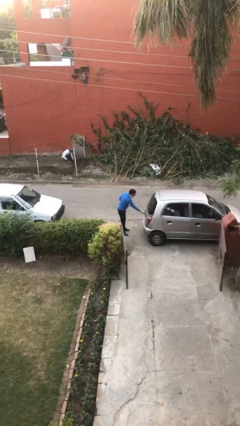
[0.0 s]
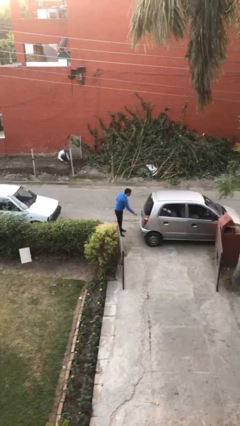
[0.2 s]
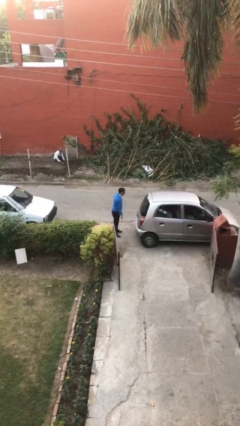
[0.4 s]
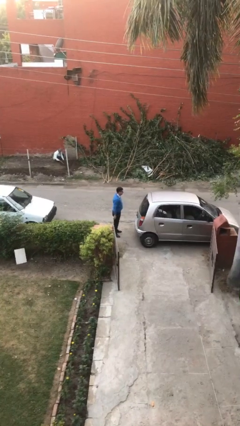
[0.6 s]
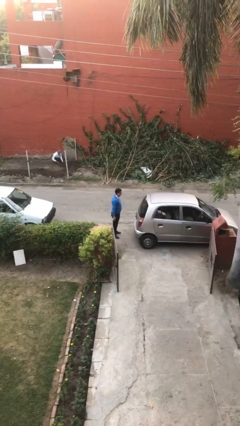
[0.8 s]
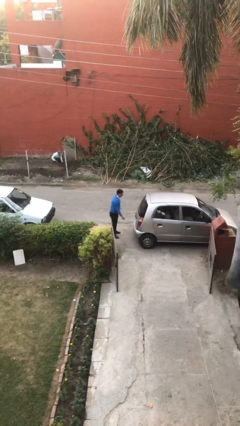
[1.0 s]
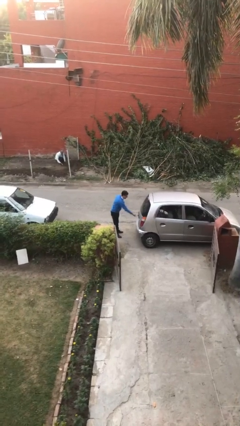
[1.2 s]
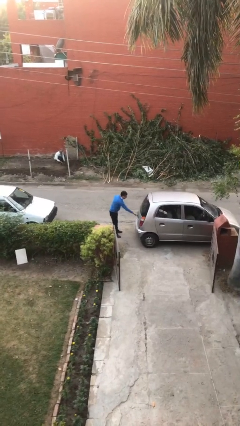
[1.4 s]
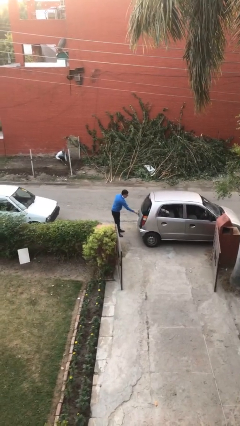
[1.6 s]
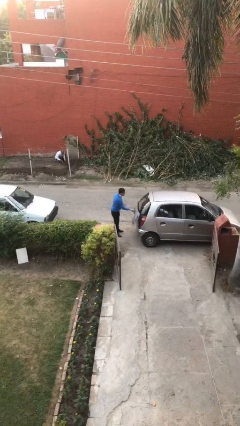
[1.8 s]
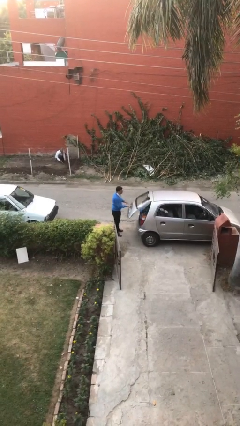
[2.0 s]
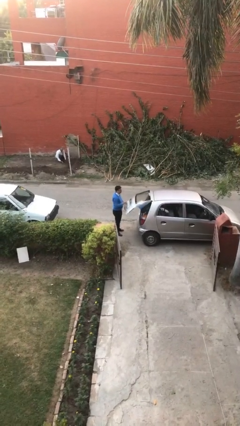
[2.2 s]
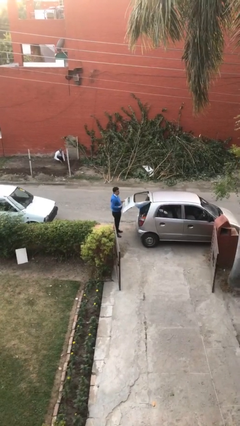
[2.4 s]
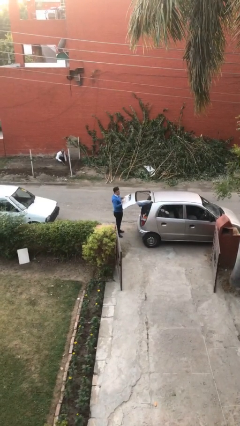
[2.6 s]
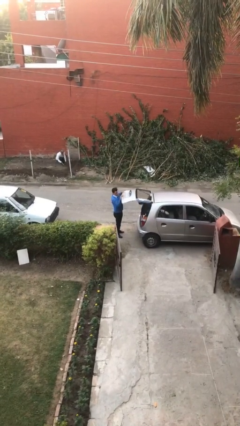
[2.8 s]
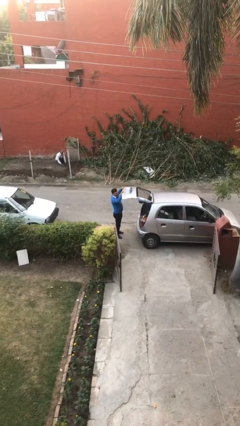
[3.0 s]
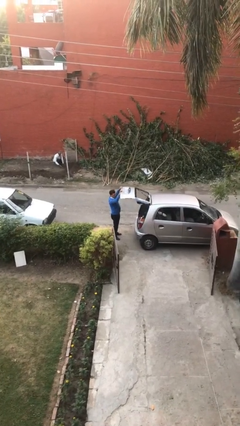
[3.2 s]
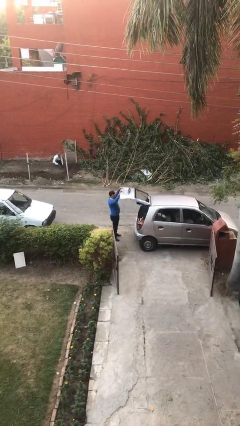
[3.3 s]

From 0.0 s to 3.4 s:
person opens car trunk

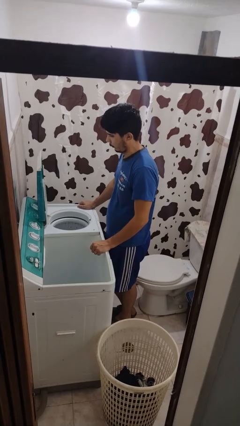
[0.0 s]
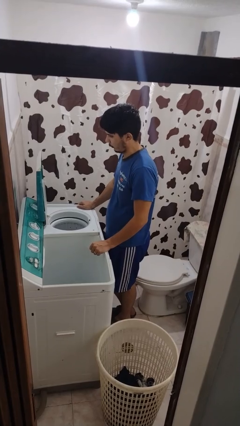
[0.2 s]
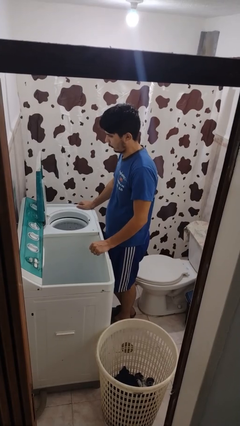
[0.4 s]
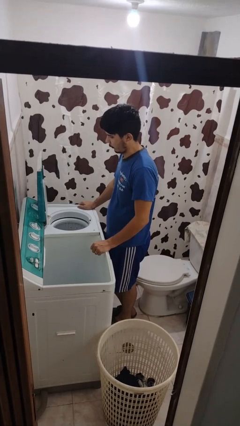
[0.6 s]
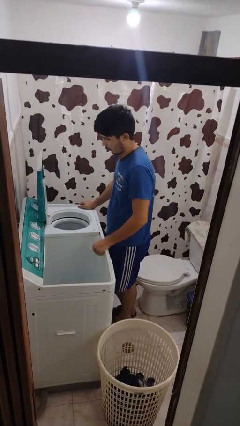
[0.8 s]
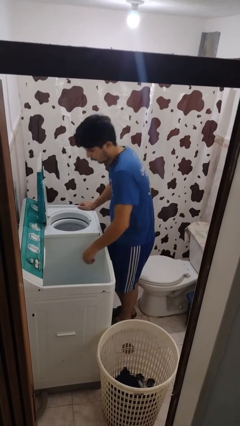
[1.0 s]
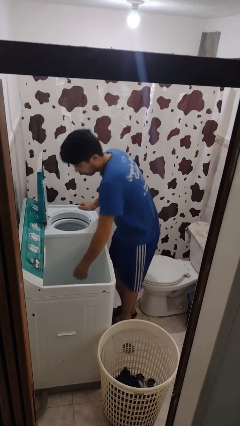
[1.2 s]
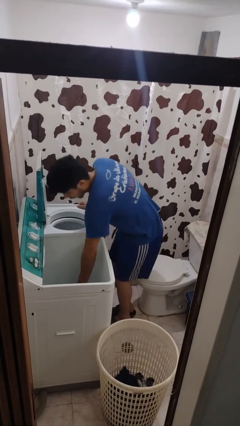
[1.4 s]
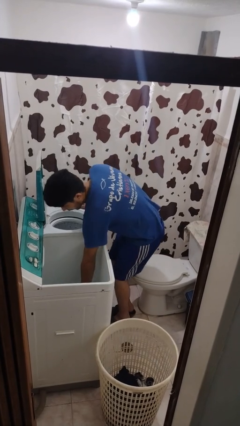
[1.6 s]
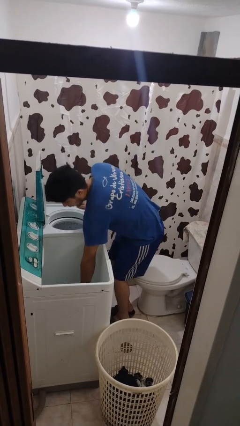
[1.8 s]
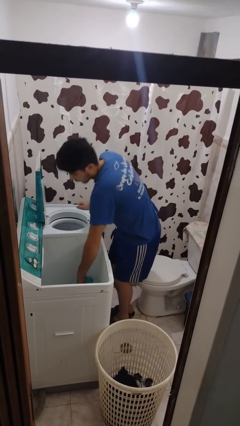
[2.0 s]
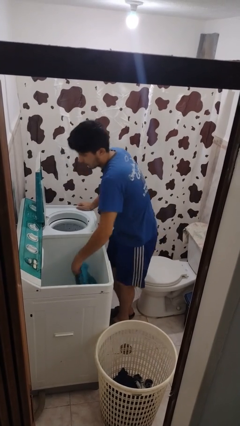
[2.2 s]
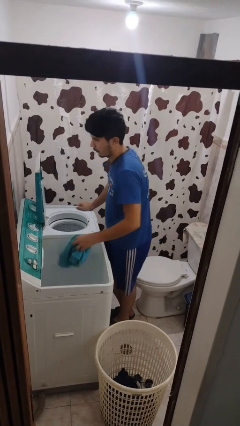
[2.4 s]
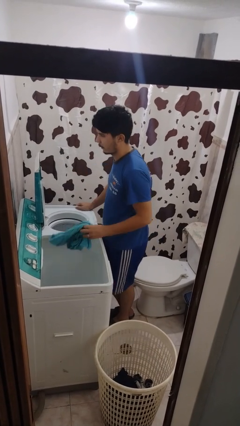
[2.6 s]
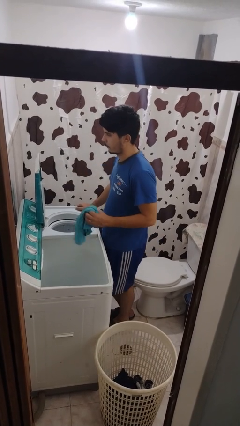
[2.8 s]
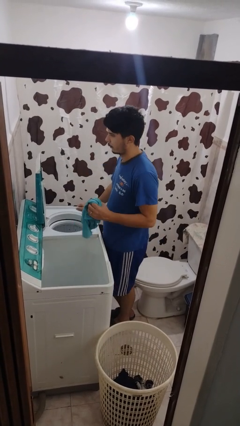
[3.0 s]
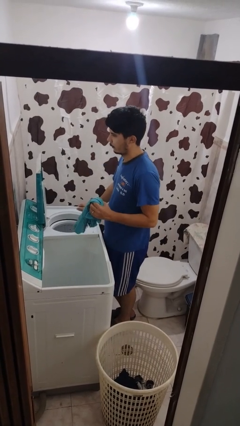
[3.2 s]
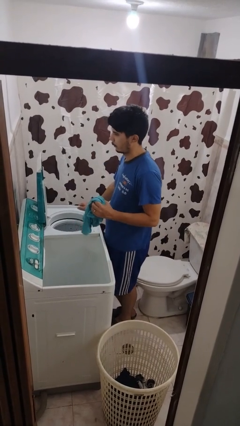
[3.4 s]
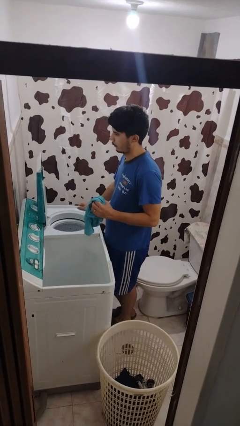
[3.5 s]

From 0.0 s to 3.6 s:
person unloads clotheswasher

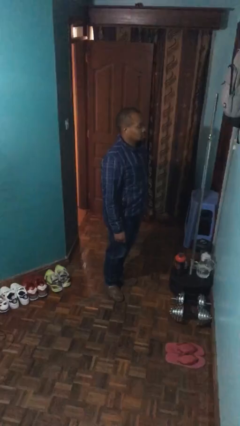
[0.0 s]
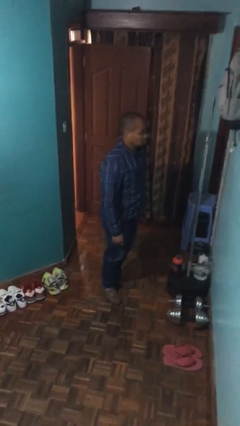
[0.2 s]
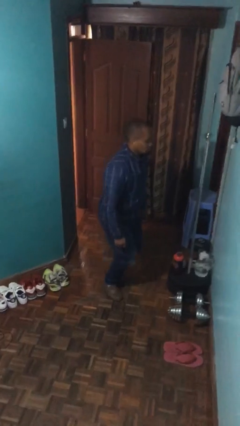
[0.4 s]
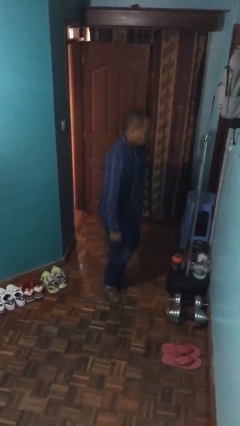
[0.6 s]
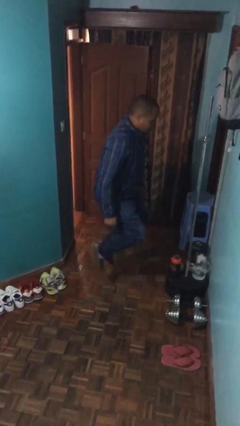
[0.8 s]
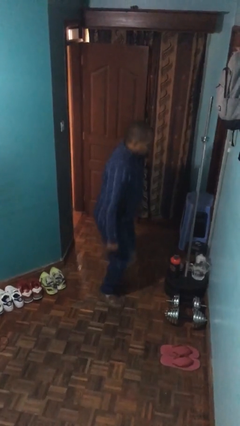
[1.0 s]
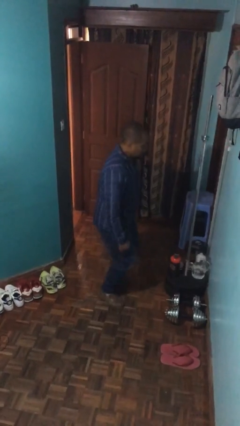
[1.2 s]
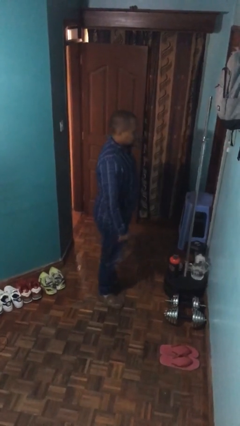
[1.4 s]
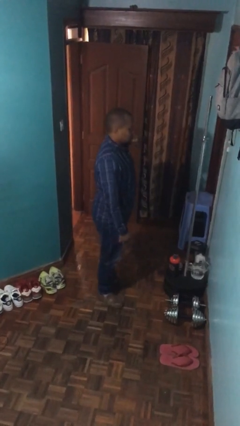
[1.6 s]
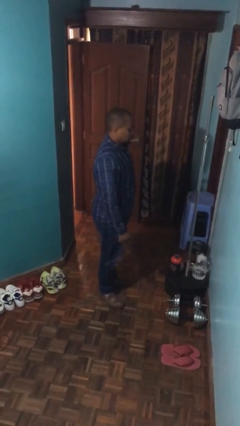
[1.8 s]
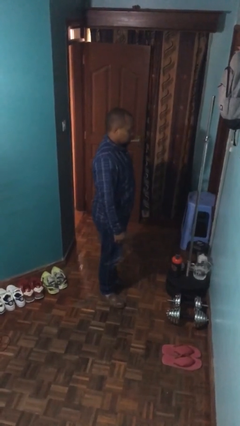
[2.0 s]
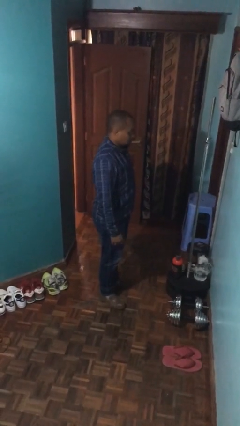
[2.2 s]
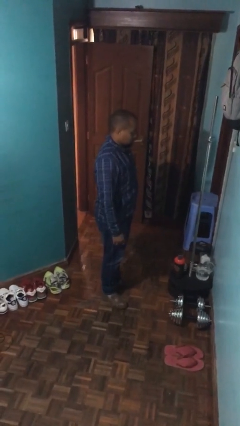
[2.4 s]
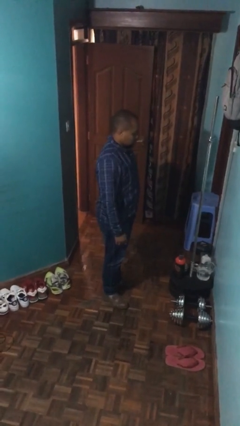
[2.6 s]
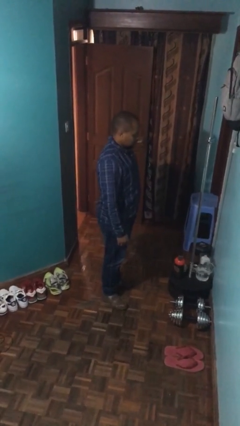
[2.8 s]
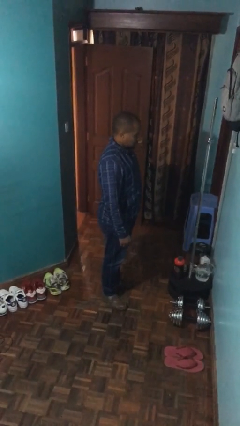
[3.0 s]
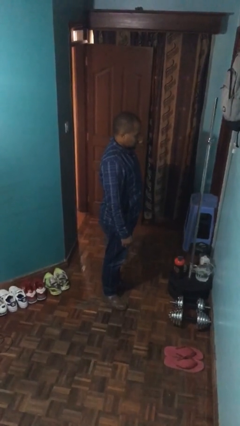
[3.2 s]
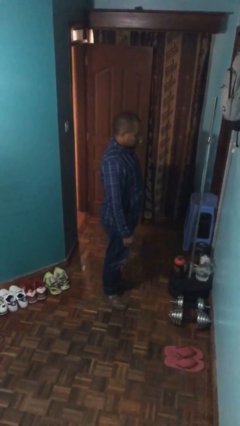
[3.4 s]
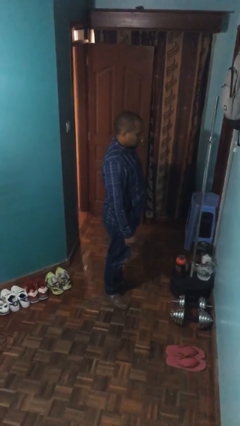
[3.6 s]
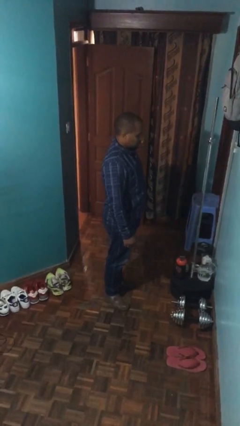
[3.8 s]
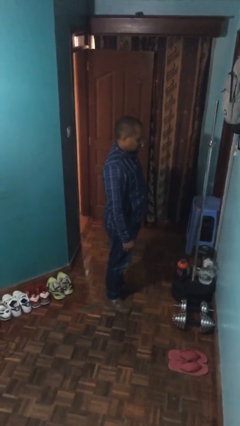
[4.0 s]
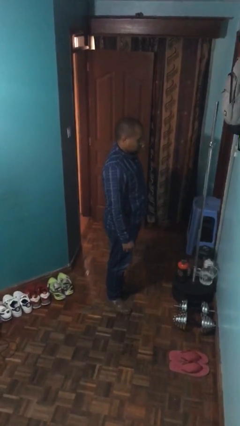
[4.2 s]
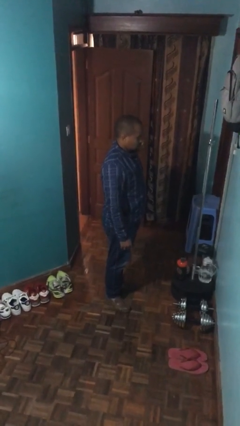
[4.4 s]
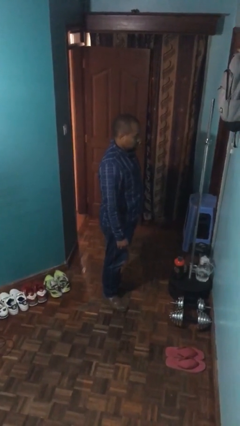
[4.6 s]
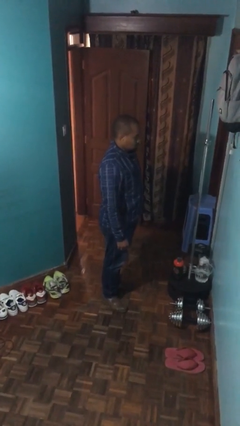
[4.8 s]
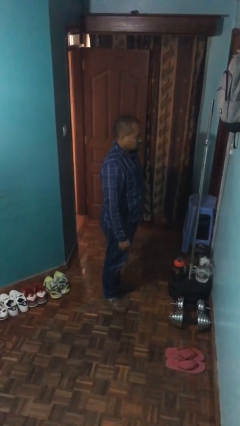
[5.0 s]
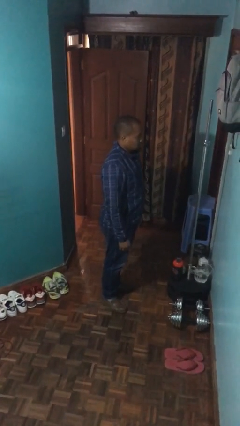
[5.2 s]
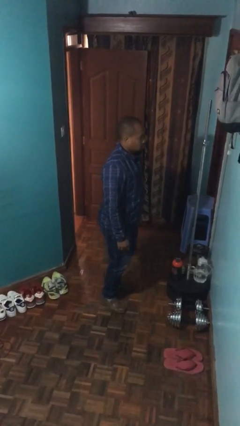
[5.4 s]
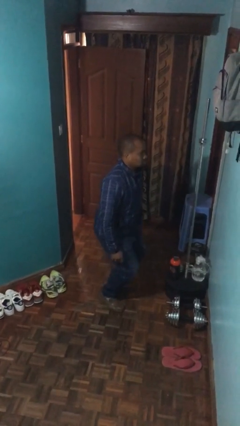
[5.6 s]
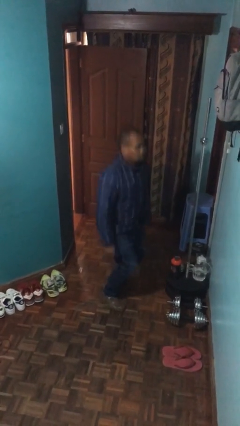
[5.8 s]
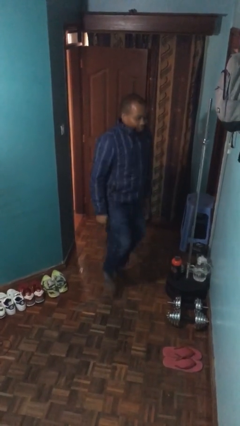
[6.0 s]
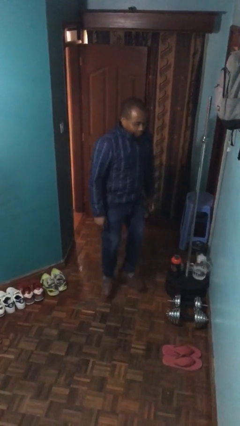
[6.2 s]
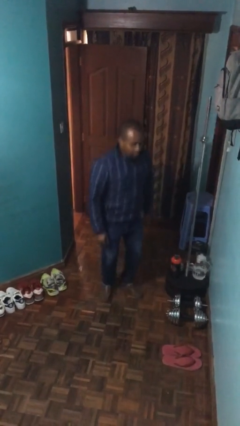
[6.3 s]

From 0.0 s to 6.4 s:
person jumps

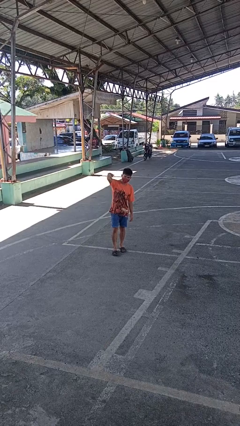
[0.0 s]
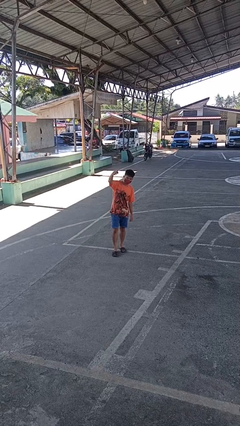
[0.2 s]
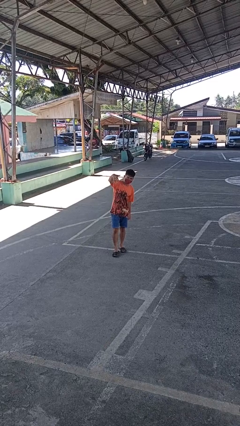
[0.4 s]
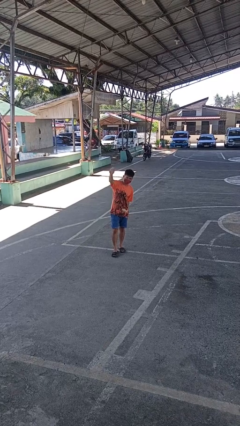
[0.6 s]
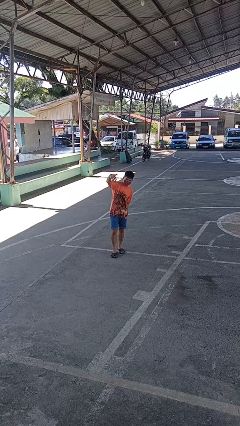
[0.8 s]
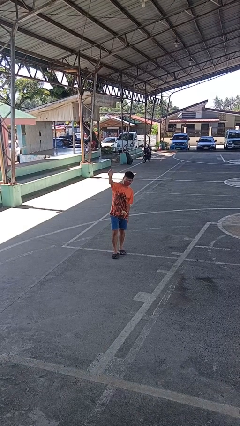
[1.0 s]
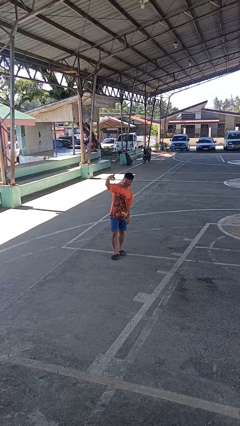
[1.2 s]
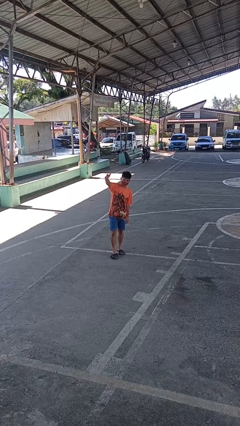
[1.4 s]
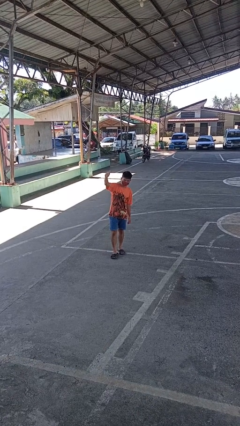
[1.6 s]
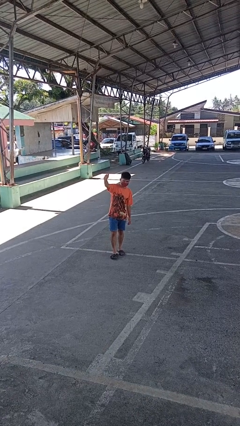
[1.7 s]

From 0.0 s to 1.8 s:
person gestures come here

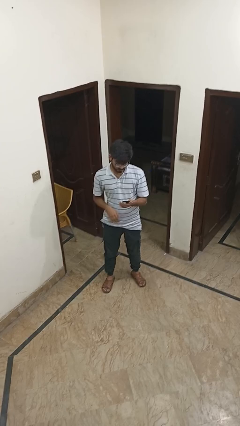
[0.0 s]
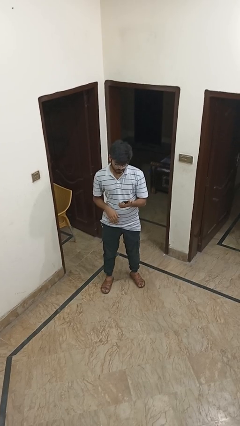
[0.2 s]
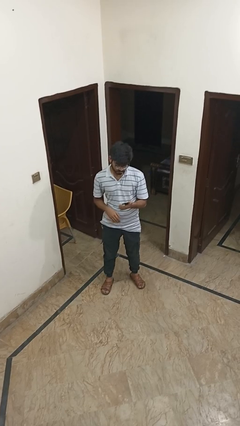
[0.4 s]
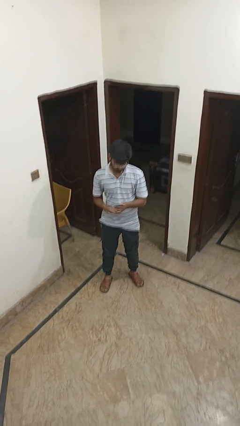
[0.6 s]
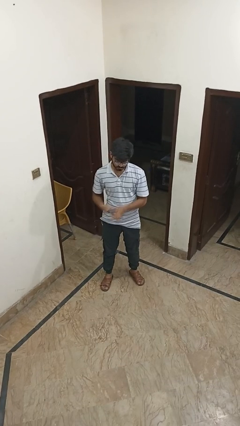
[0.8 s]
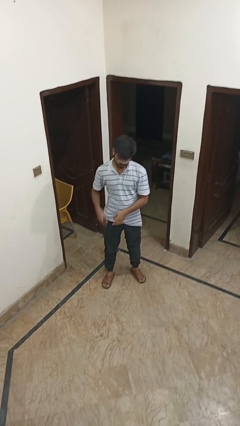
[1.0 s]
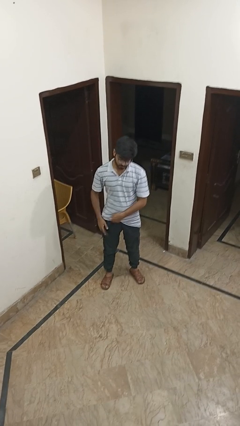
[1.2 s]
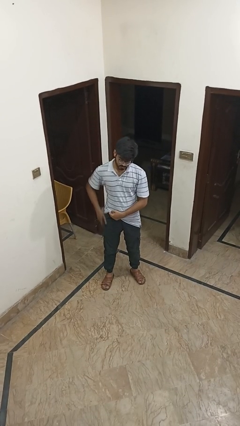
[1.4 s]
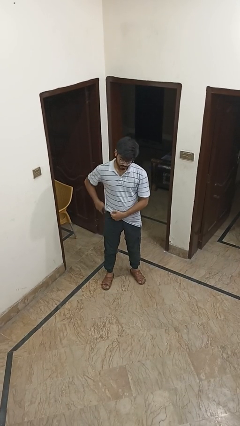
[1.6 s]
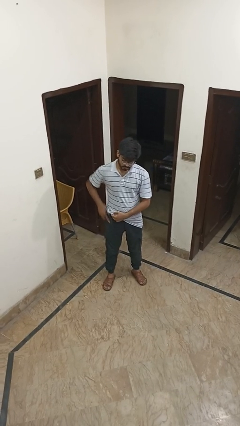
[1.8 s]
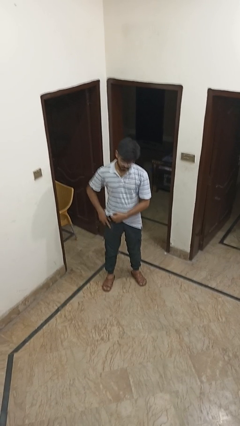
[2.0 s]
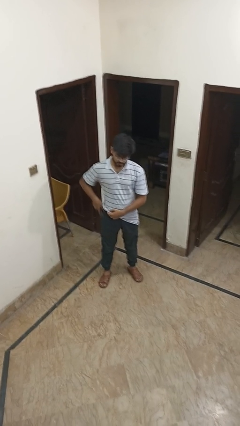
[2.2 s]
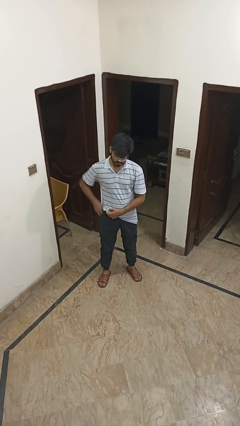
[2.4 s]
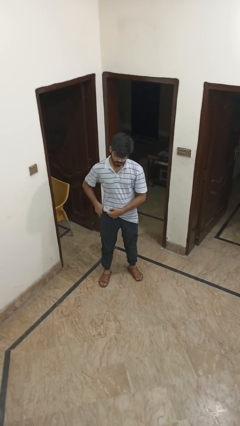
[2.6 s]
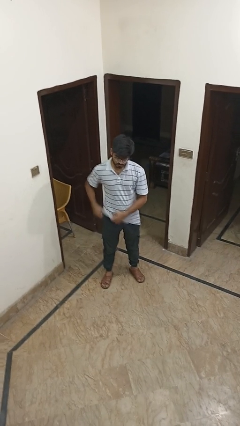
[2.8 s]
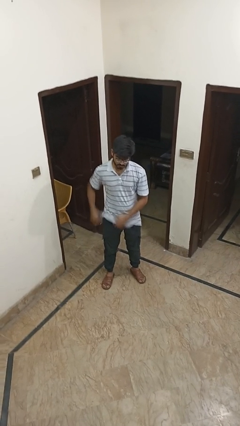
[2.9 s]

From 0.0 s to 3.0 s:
person puts phone into pocket
